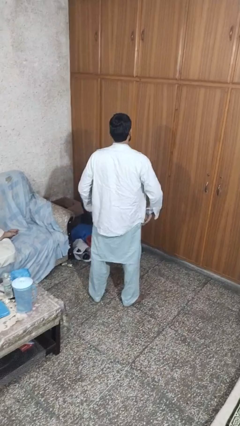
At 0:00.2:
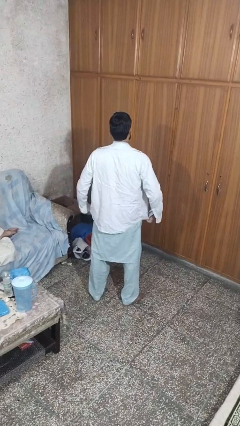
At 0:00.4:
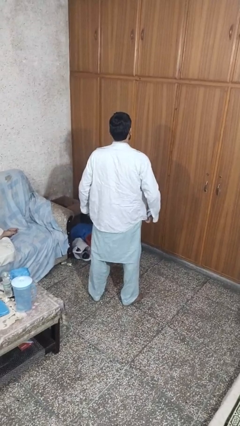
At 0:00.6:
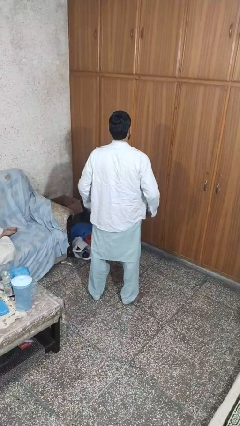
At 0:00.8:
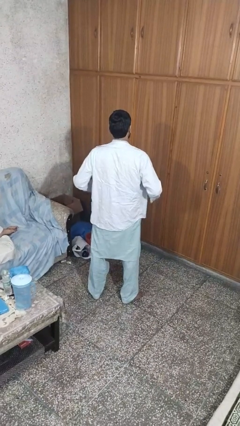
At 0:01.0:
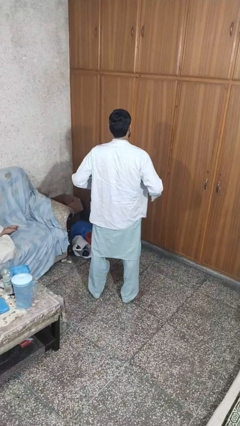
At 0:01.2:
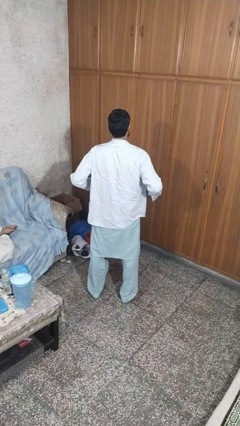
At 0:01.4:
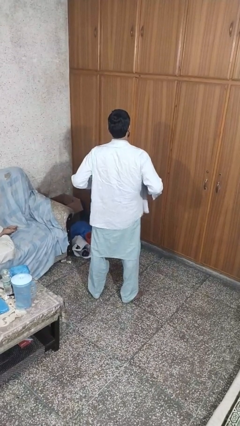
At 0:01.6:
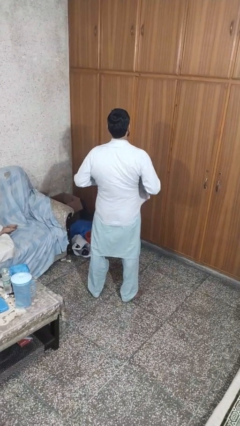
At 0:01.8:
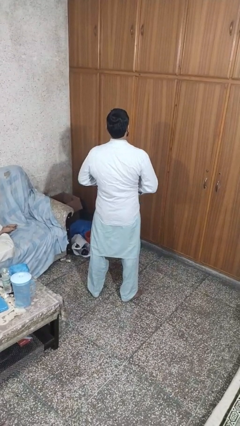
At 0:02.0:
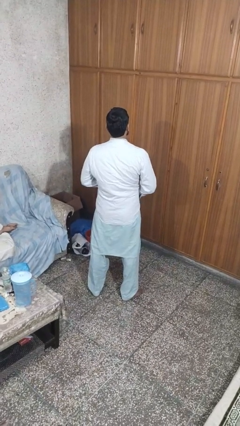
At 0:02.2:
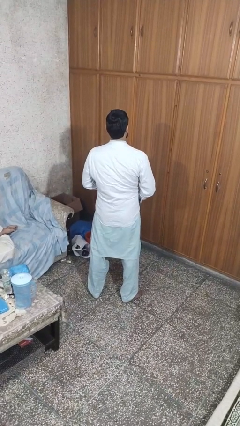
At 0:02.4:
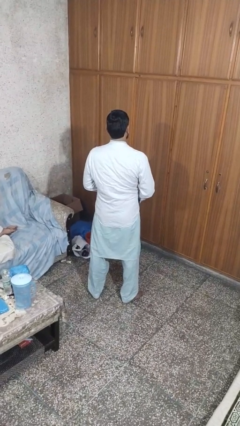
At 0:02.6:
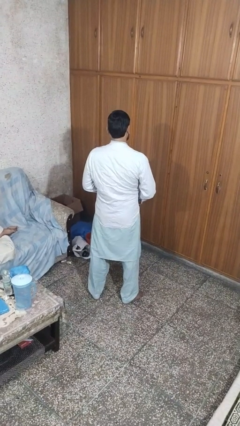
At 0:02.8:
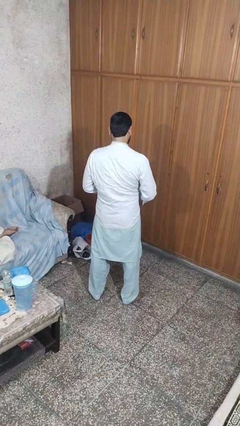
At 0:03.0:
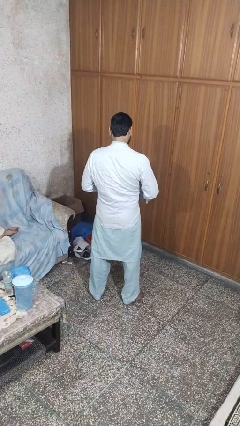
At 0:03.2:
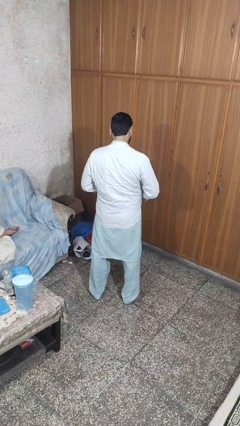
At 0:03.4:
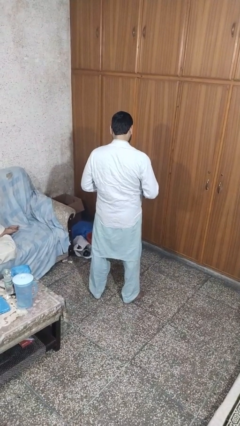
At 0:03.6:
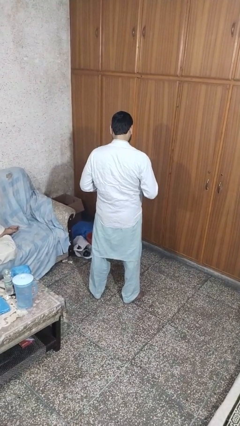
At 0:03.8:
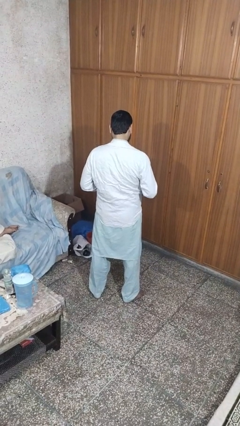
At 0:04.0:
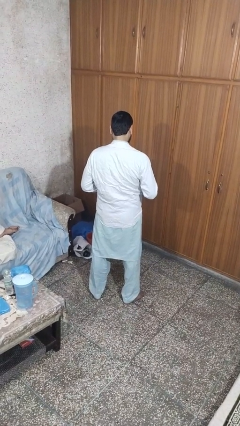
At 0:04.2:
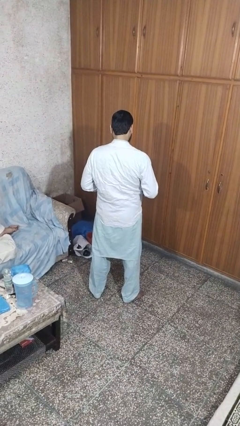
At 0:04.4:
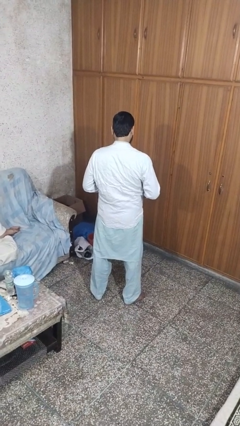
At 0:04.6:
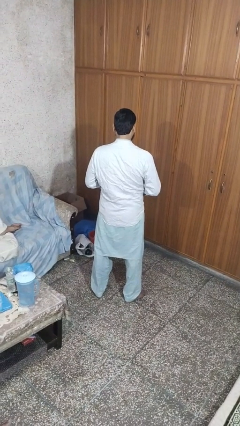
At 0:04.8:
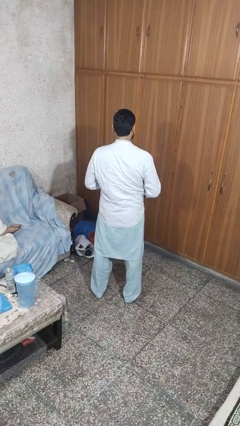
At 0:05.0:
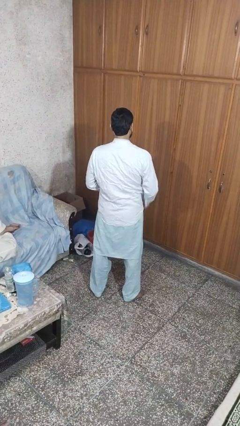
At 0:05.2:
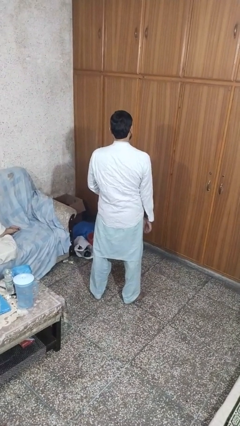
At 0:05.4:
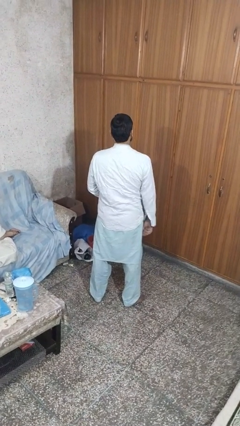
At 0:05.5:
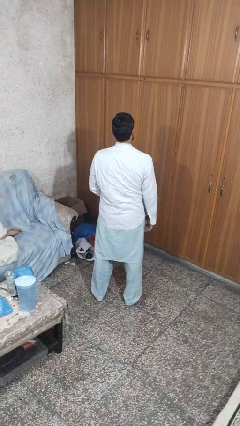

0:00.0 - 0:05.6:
person buttons shirt

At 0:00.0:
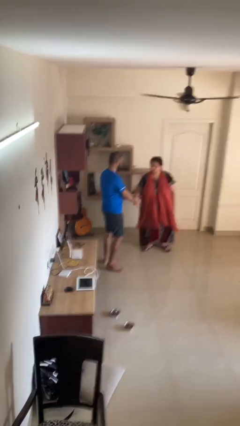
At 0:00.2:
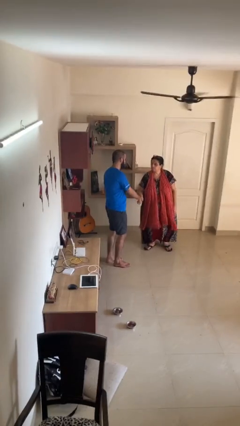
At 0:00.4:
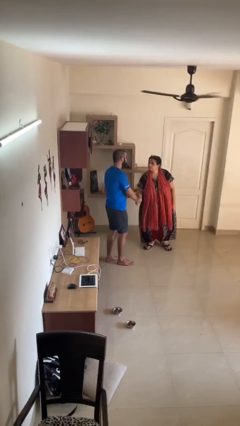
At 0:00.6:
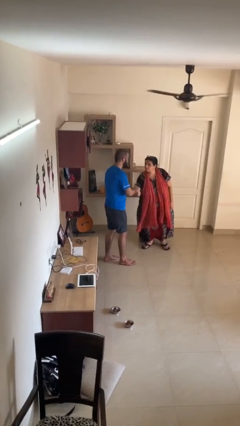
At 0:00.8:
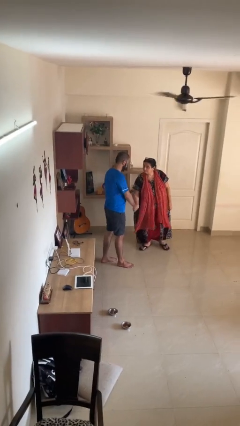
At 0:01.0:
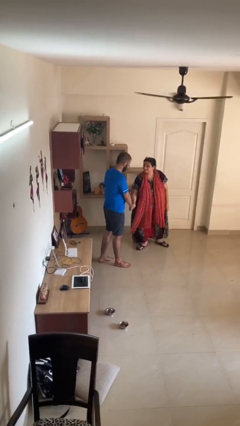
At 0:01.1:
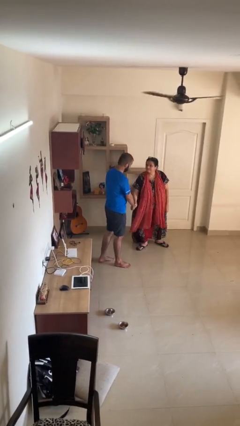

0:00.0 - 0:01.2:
person shakes hand

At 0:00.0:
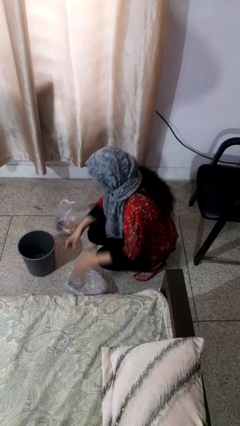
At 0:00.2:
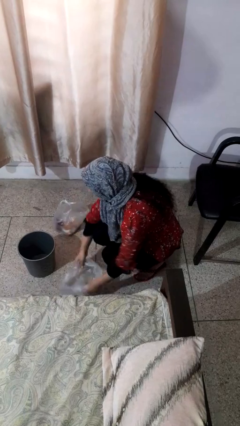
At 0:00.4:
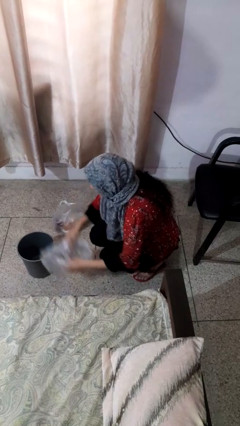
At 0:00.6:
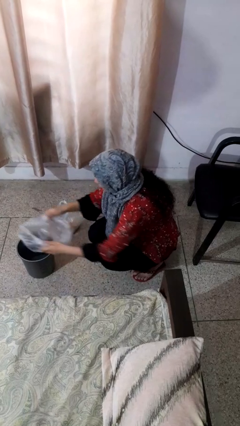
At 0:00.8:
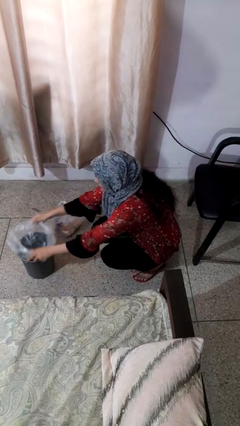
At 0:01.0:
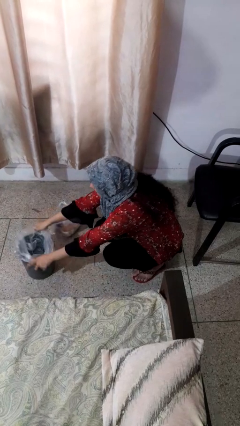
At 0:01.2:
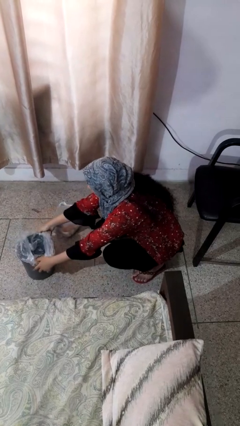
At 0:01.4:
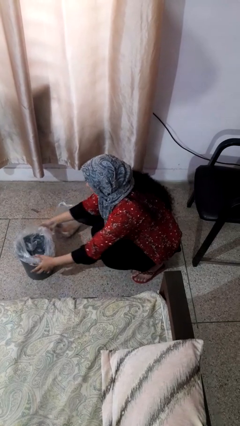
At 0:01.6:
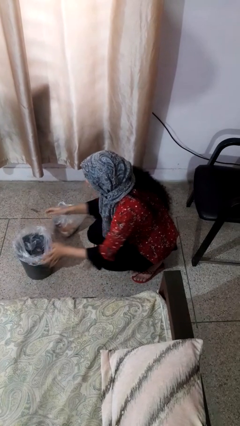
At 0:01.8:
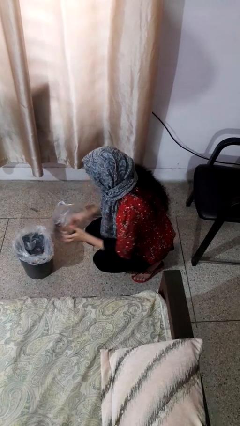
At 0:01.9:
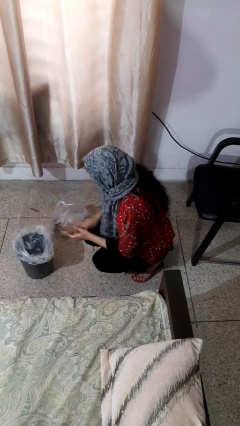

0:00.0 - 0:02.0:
person inserts trashbag into trashcan

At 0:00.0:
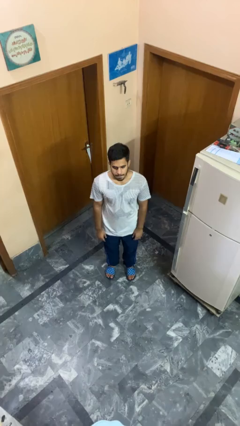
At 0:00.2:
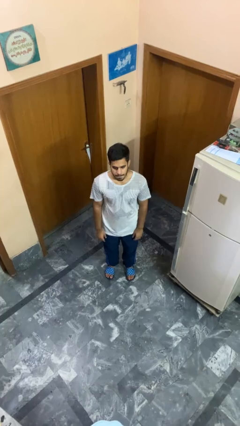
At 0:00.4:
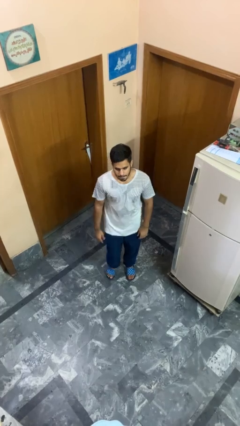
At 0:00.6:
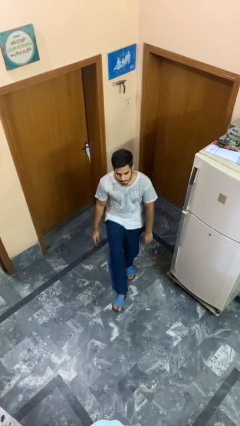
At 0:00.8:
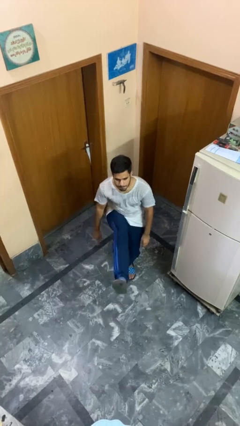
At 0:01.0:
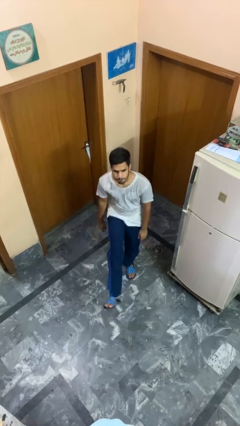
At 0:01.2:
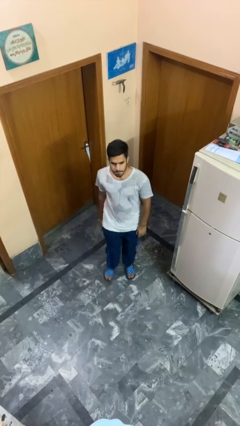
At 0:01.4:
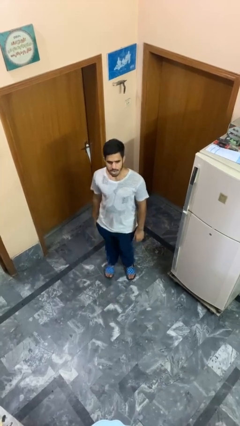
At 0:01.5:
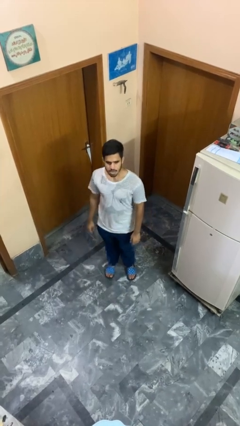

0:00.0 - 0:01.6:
person karate kicks

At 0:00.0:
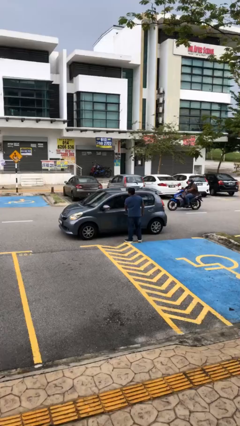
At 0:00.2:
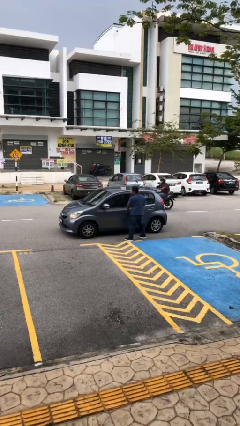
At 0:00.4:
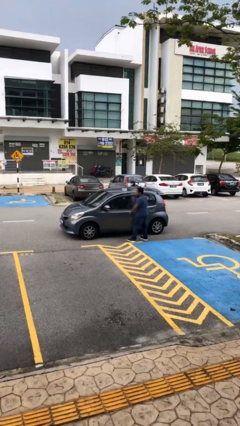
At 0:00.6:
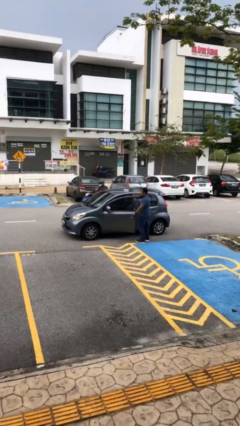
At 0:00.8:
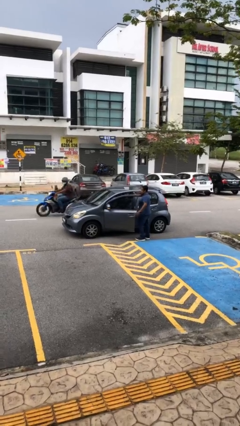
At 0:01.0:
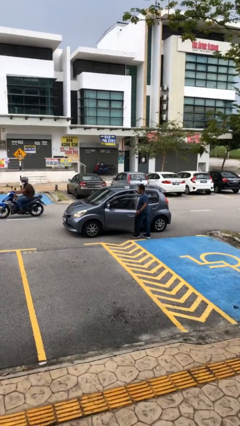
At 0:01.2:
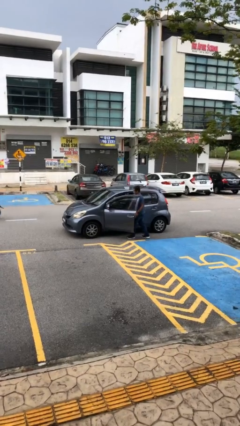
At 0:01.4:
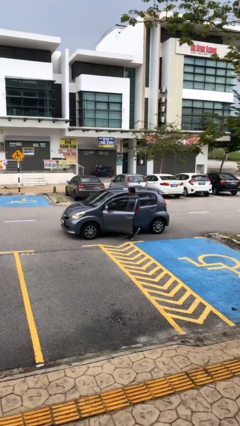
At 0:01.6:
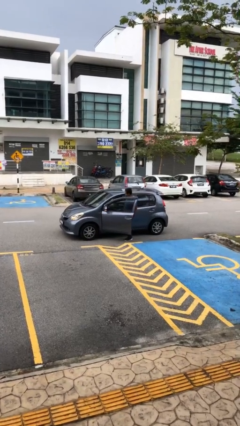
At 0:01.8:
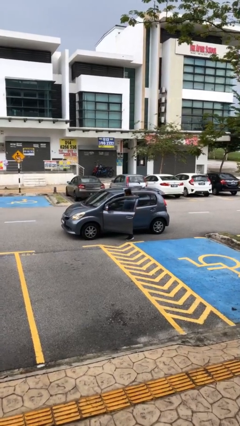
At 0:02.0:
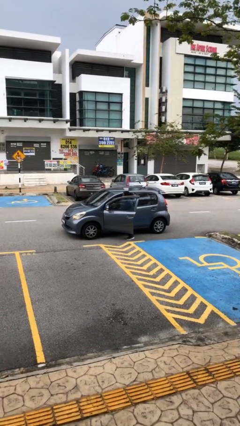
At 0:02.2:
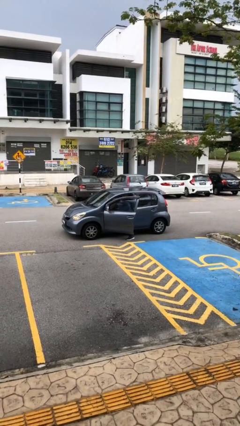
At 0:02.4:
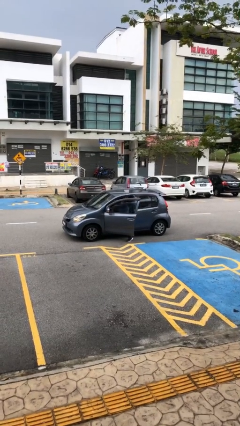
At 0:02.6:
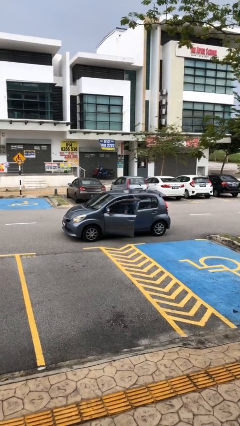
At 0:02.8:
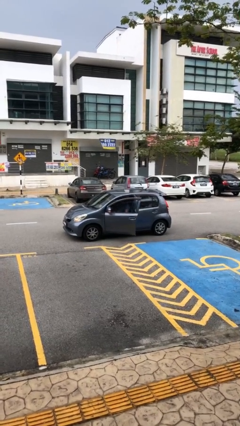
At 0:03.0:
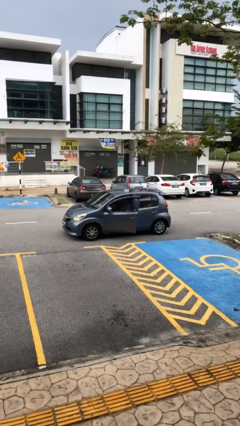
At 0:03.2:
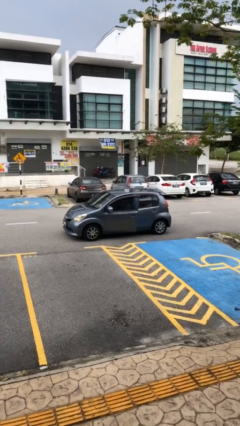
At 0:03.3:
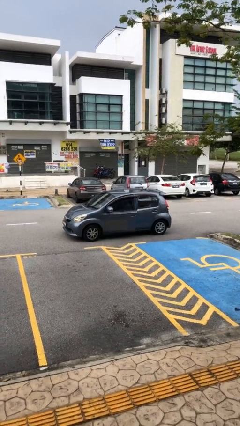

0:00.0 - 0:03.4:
car picks up person

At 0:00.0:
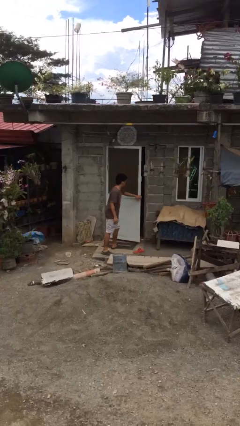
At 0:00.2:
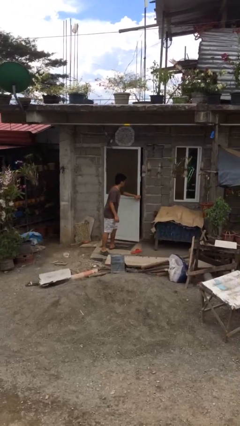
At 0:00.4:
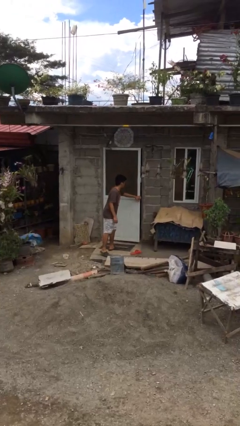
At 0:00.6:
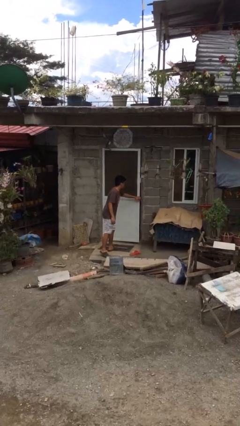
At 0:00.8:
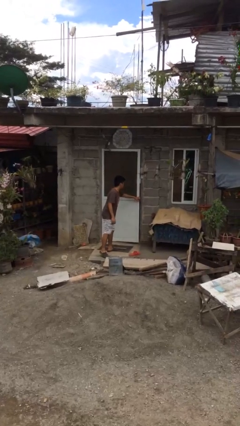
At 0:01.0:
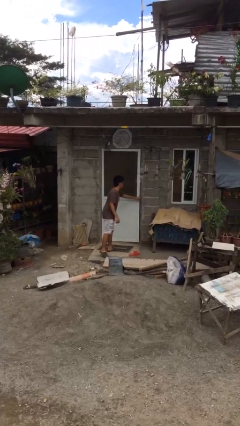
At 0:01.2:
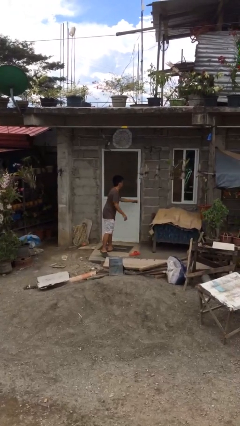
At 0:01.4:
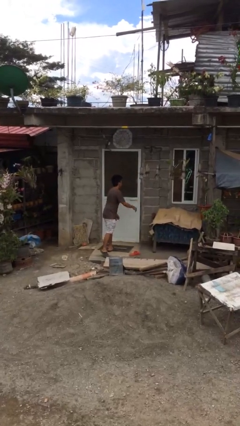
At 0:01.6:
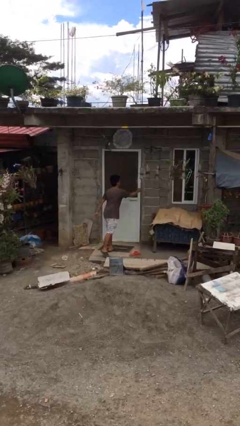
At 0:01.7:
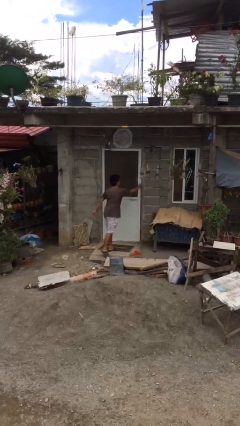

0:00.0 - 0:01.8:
person closes facility door

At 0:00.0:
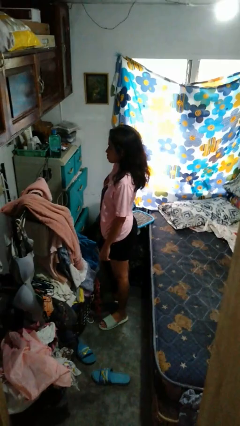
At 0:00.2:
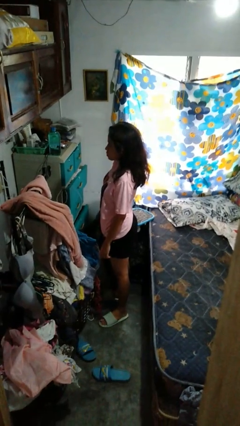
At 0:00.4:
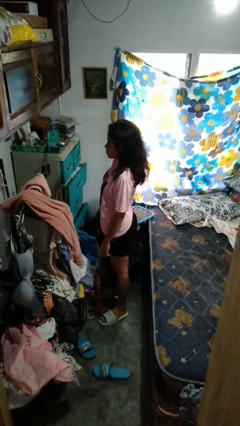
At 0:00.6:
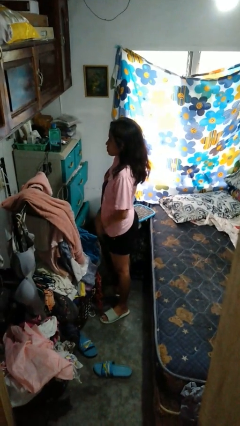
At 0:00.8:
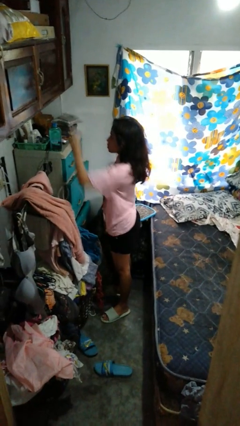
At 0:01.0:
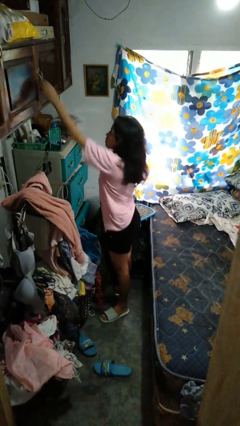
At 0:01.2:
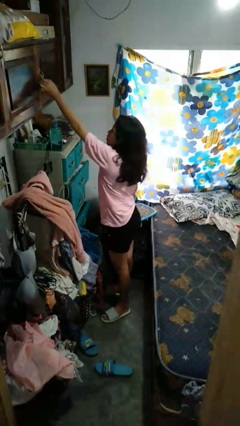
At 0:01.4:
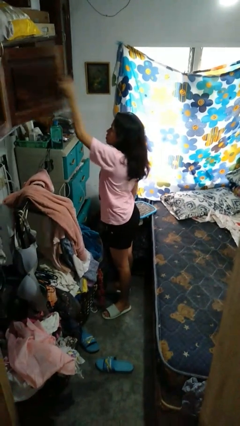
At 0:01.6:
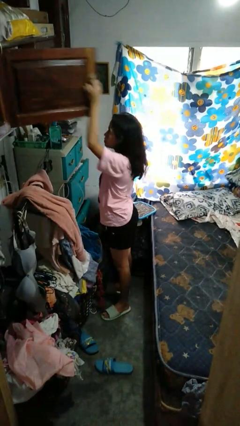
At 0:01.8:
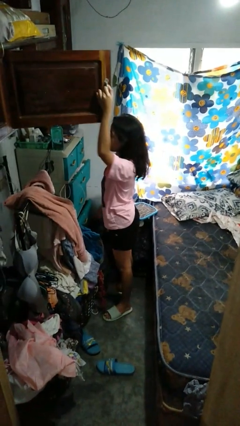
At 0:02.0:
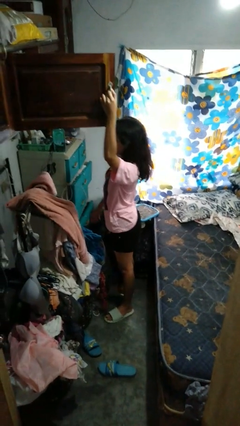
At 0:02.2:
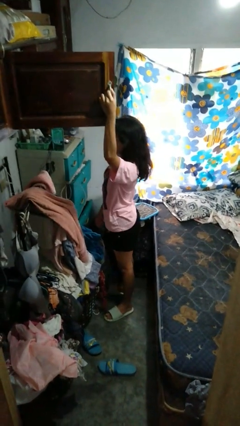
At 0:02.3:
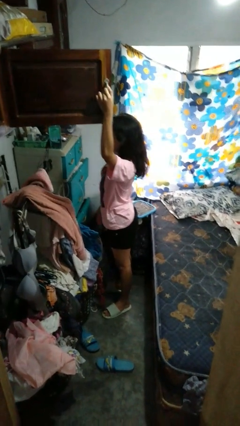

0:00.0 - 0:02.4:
person opens closet door
